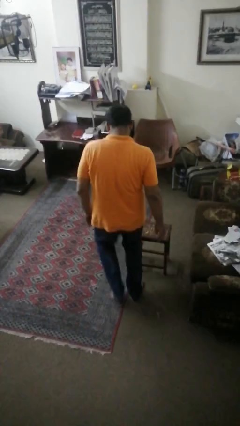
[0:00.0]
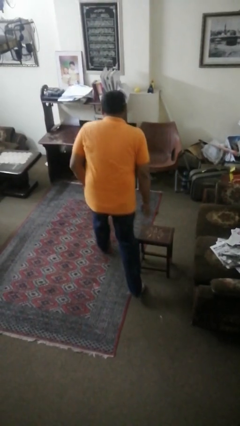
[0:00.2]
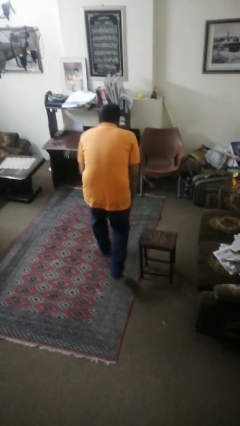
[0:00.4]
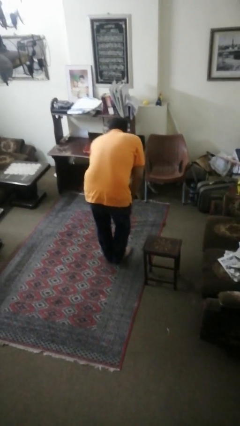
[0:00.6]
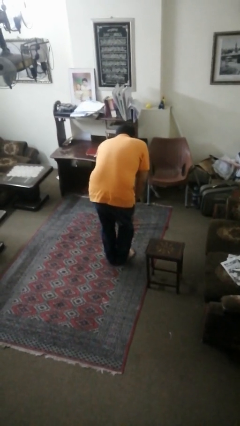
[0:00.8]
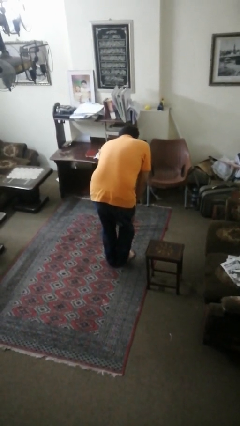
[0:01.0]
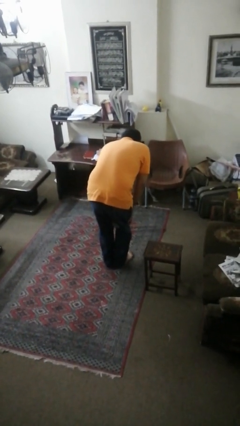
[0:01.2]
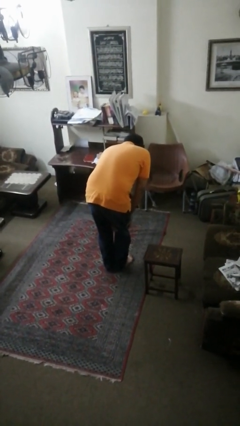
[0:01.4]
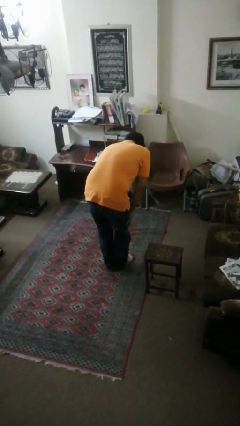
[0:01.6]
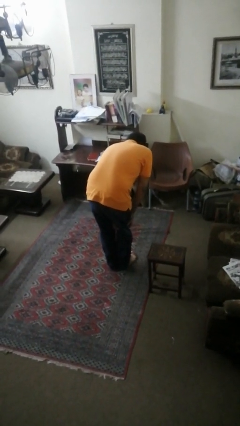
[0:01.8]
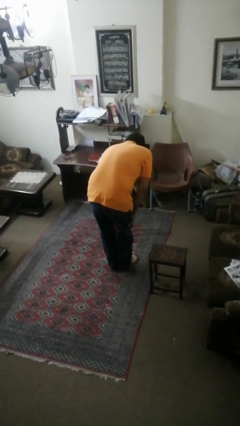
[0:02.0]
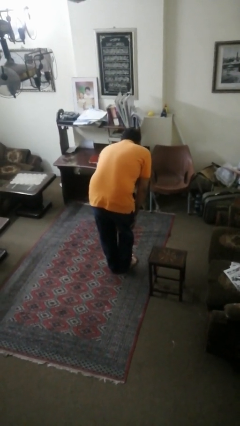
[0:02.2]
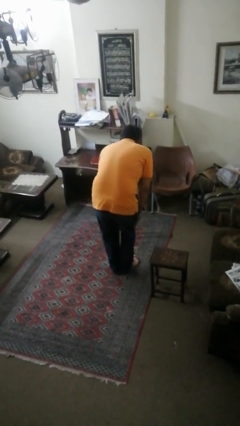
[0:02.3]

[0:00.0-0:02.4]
person bumps into table

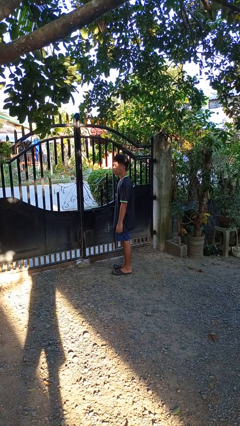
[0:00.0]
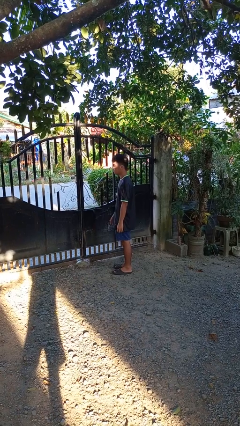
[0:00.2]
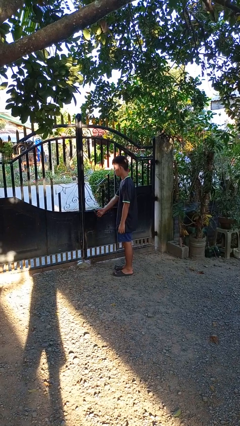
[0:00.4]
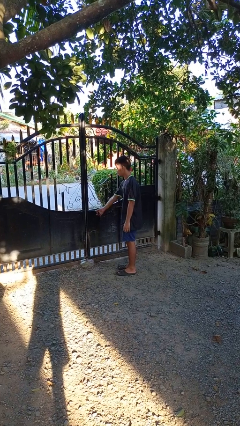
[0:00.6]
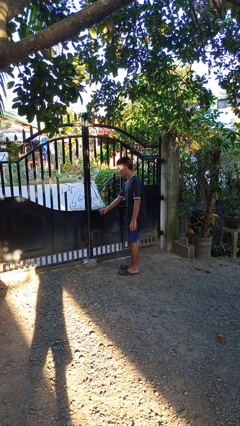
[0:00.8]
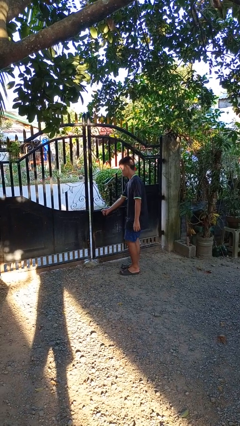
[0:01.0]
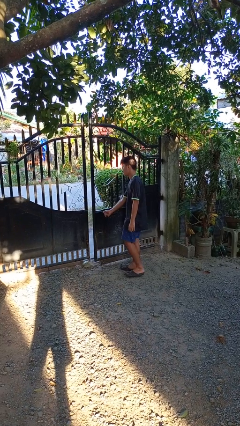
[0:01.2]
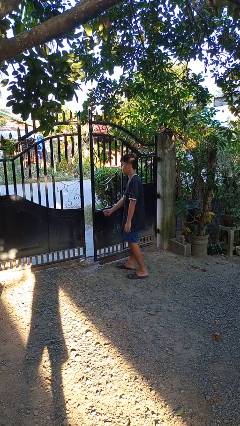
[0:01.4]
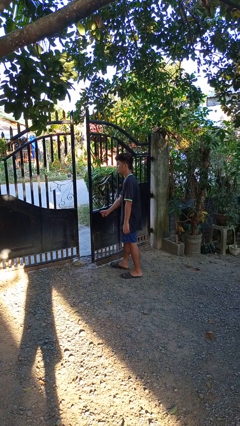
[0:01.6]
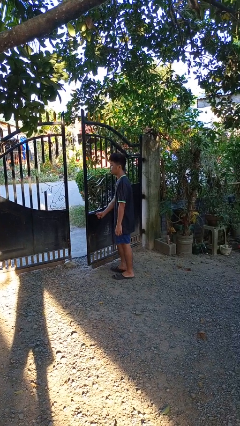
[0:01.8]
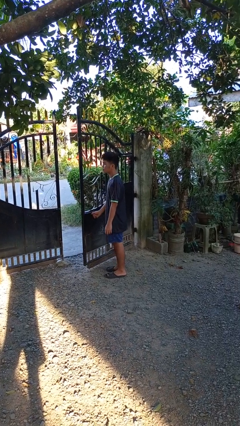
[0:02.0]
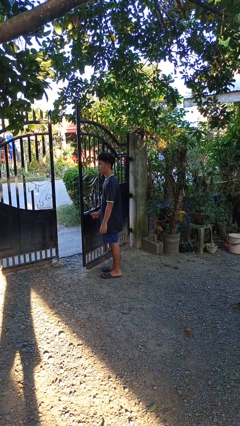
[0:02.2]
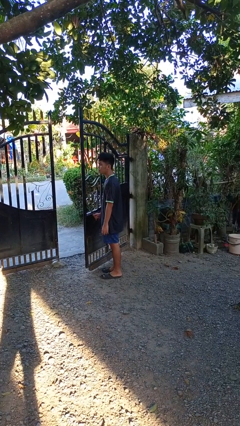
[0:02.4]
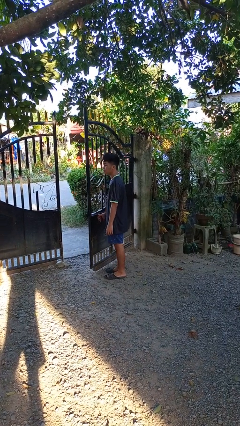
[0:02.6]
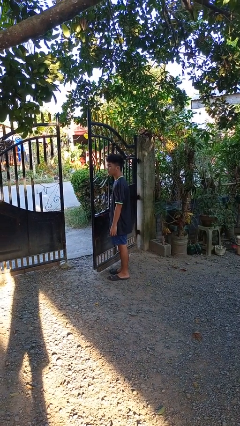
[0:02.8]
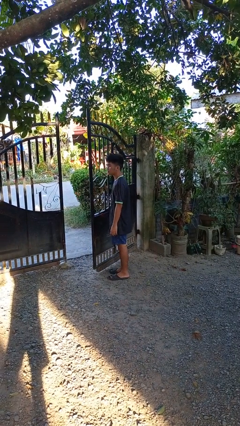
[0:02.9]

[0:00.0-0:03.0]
person opens gate

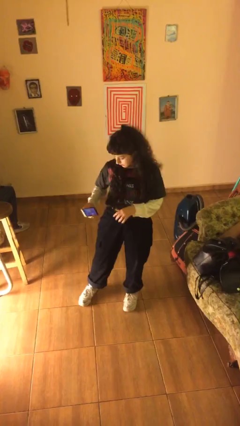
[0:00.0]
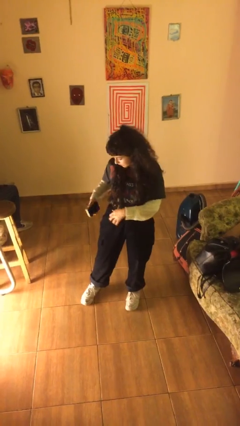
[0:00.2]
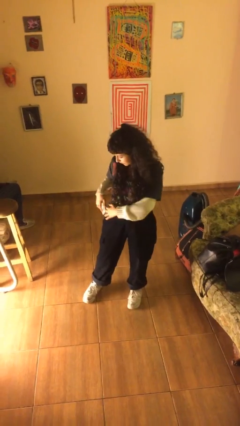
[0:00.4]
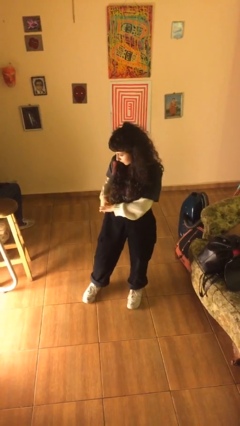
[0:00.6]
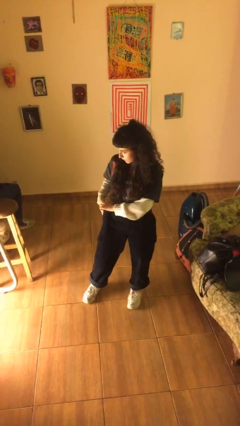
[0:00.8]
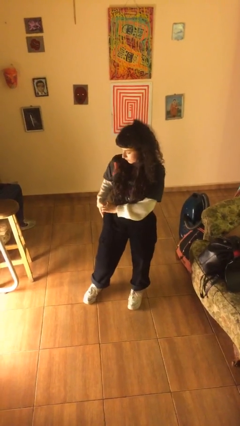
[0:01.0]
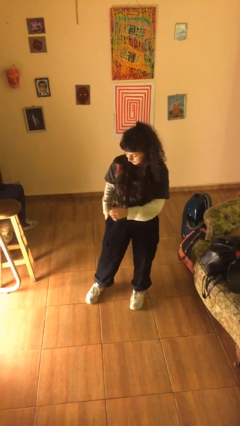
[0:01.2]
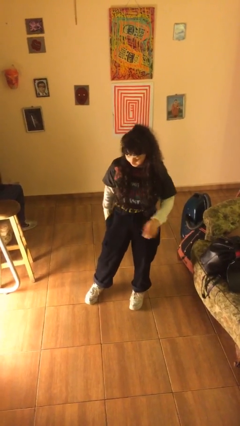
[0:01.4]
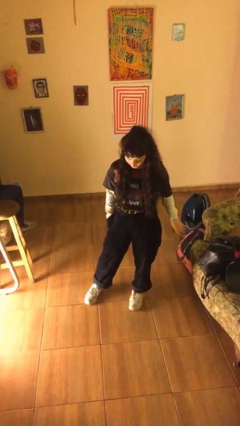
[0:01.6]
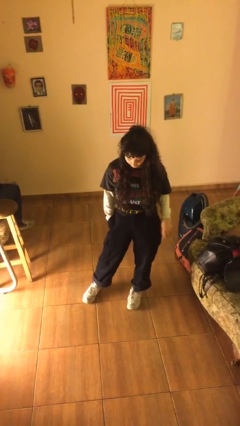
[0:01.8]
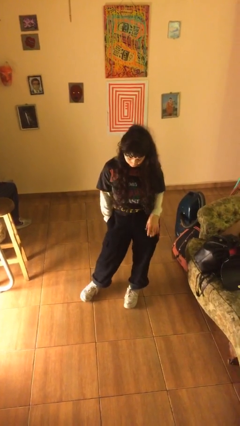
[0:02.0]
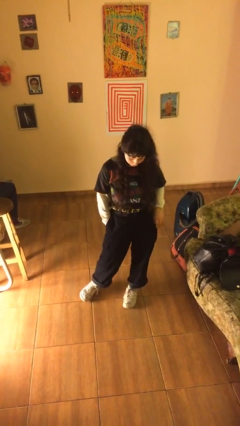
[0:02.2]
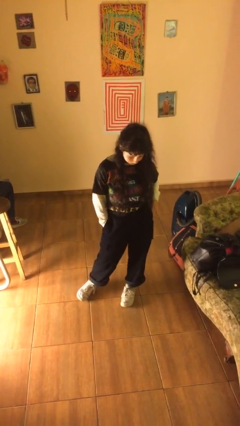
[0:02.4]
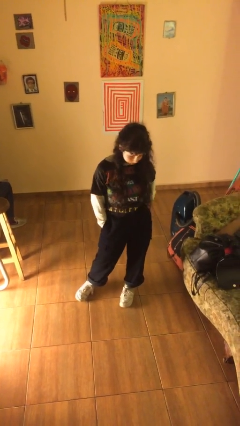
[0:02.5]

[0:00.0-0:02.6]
person puts phone into pocket

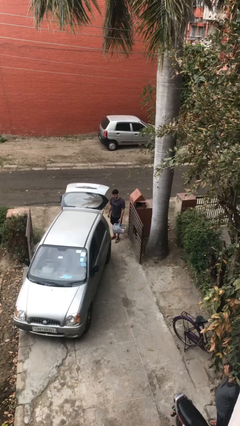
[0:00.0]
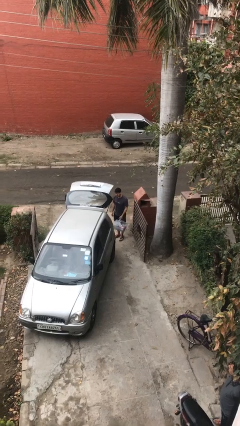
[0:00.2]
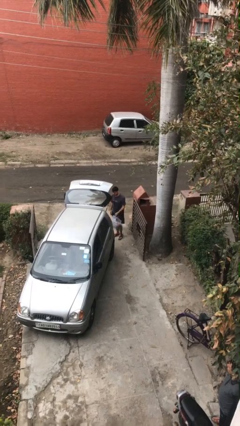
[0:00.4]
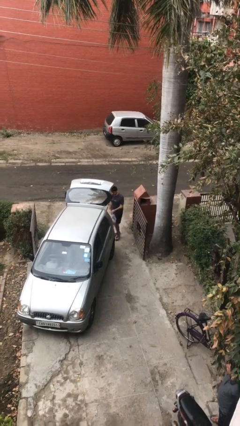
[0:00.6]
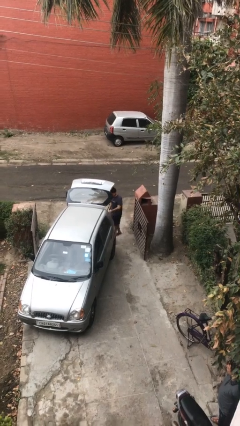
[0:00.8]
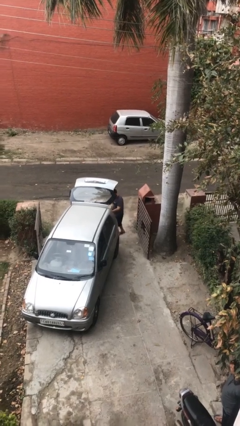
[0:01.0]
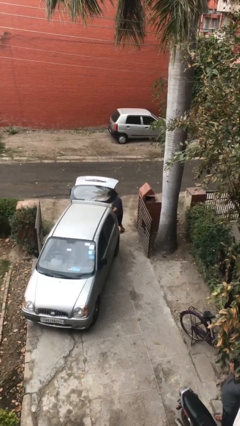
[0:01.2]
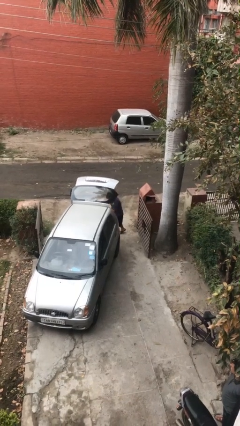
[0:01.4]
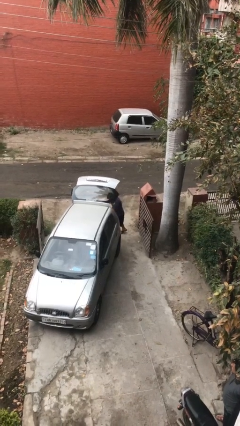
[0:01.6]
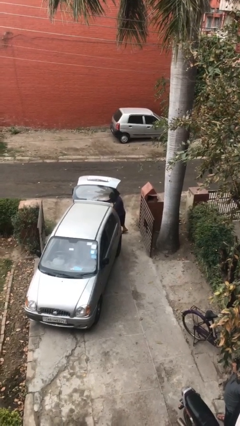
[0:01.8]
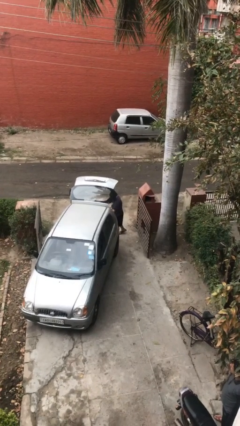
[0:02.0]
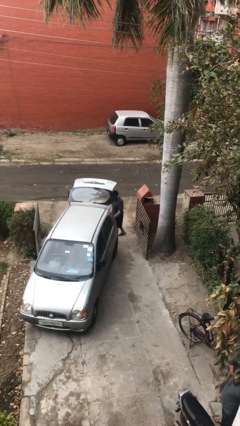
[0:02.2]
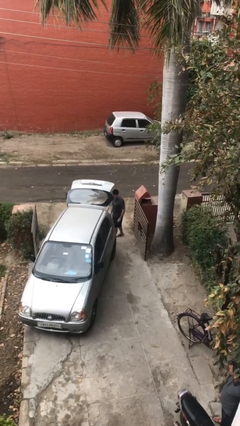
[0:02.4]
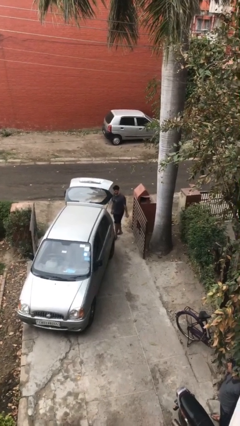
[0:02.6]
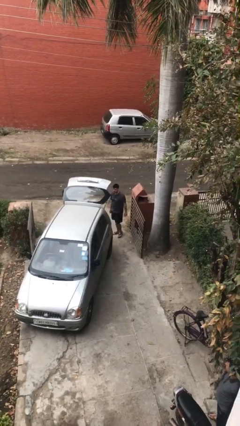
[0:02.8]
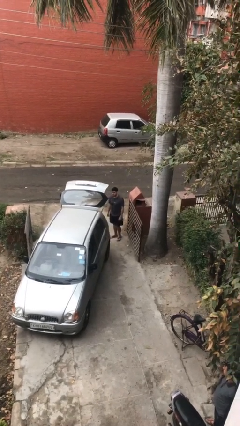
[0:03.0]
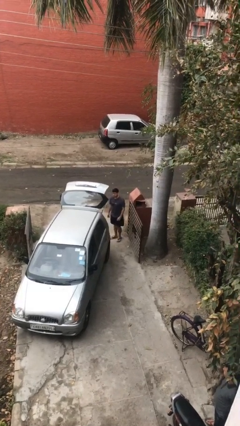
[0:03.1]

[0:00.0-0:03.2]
person loads car

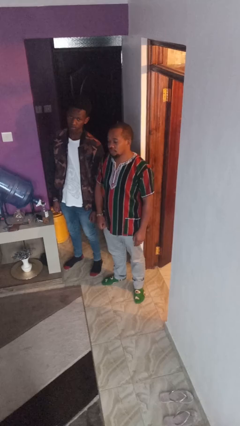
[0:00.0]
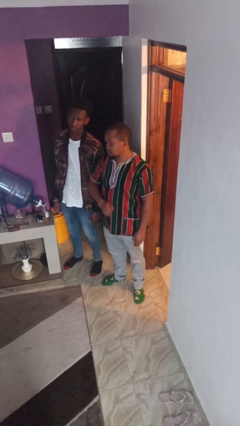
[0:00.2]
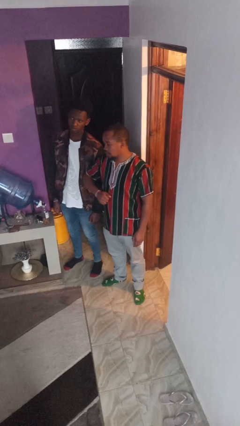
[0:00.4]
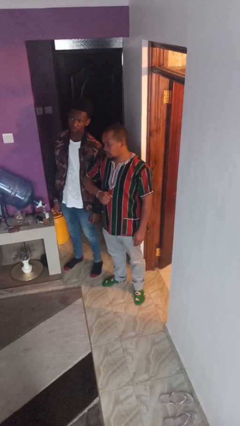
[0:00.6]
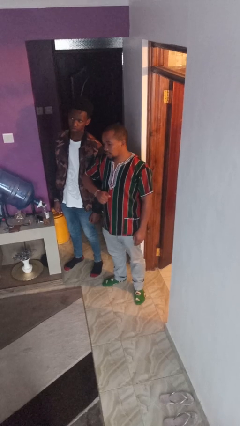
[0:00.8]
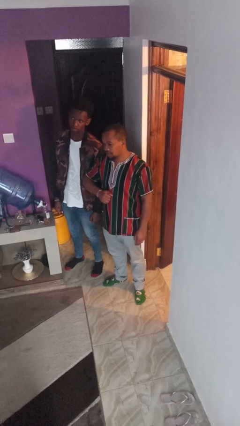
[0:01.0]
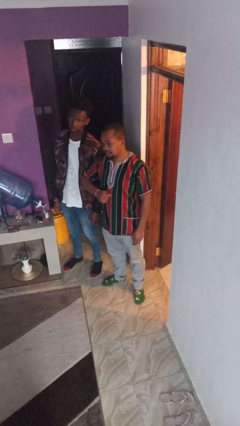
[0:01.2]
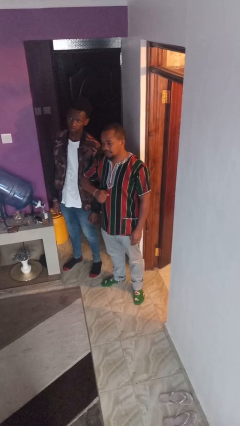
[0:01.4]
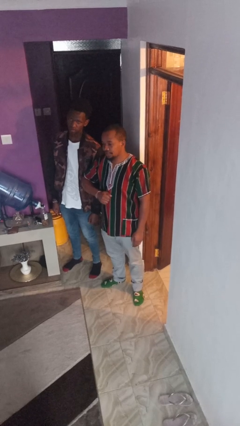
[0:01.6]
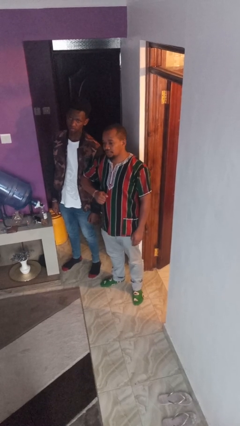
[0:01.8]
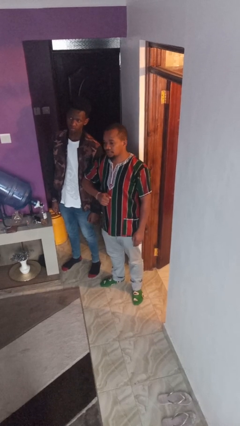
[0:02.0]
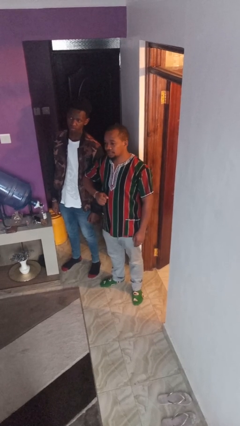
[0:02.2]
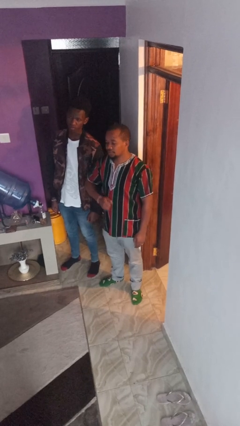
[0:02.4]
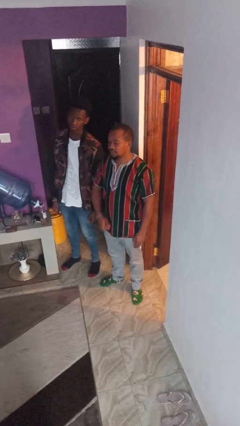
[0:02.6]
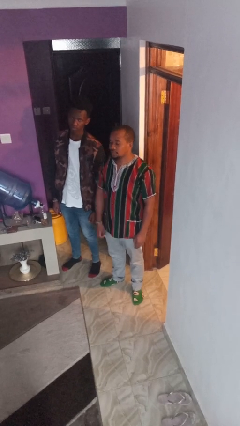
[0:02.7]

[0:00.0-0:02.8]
person nudges person with elbow

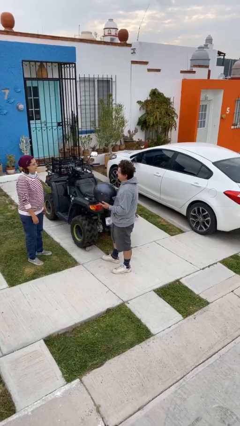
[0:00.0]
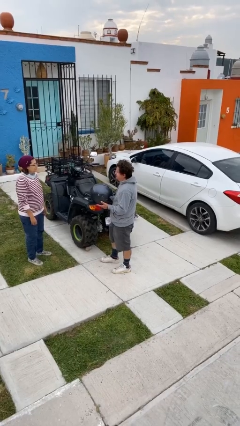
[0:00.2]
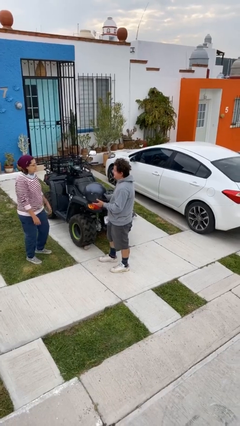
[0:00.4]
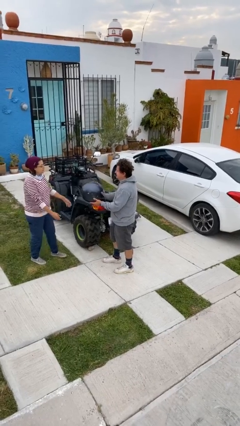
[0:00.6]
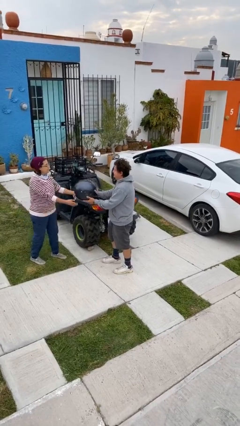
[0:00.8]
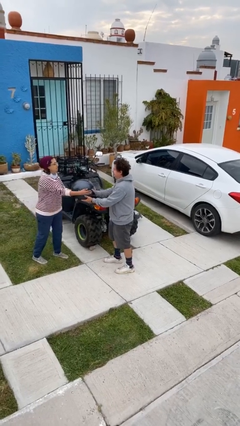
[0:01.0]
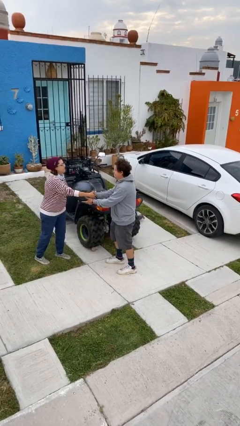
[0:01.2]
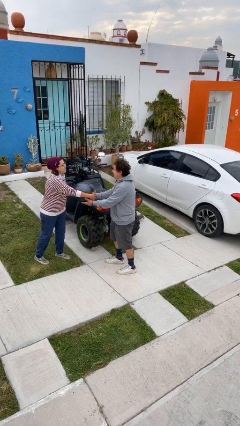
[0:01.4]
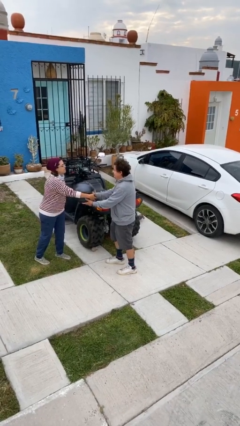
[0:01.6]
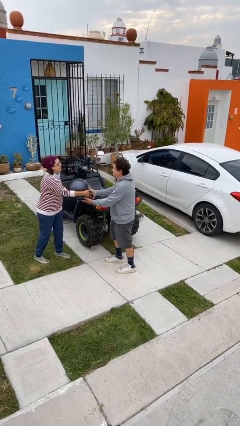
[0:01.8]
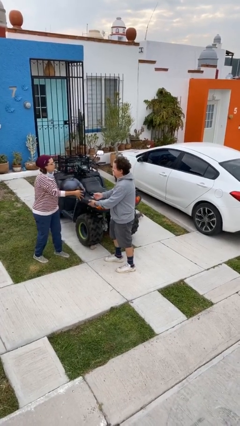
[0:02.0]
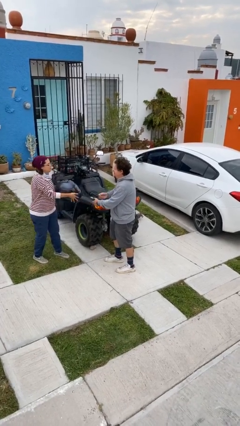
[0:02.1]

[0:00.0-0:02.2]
person transfers object to person

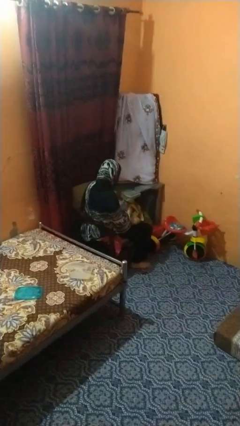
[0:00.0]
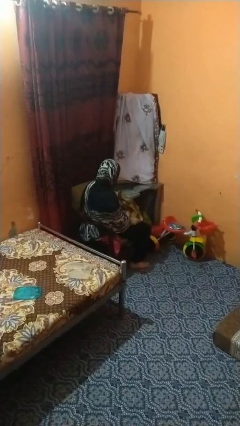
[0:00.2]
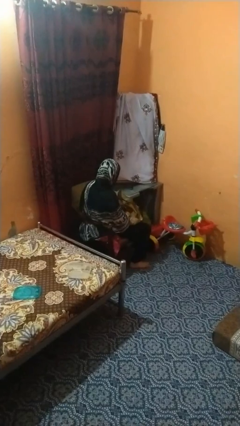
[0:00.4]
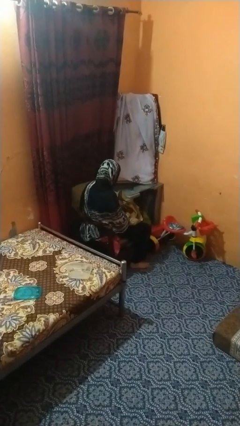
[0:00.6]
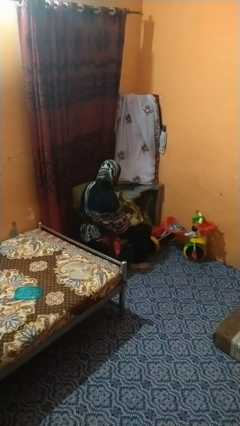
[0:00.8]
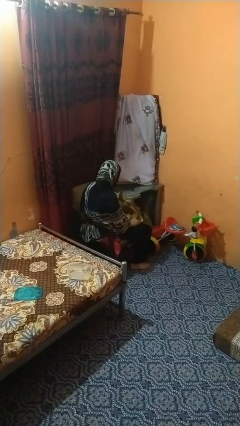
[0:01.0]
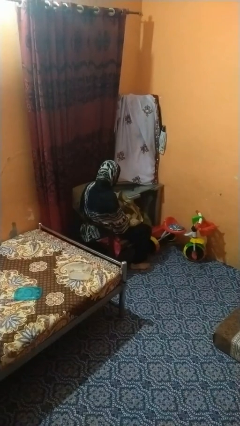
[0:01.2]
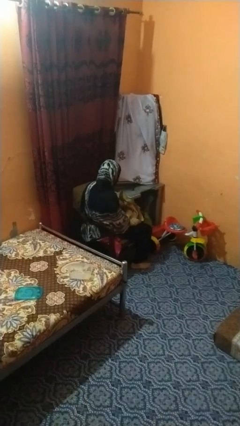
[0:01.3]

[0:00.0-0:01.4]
person puts object into bag
